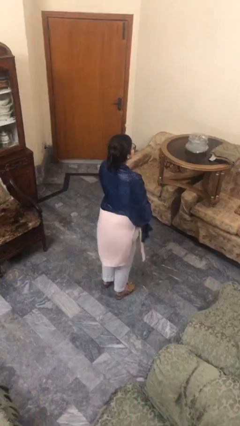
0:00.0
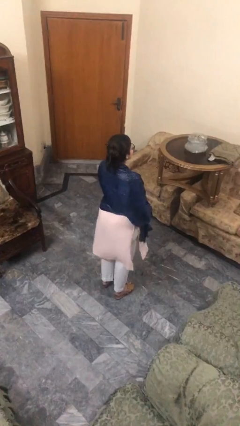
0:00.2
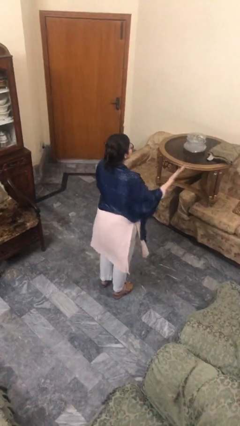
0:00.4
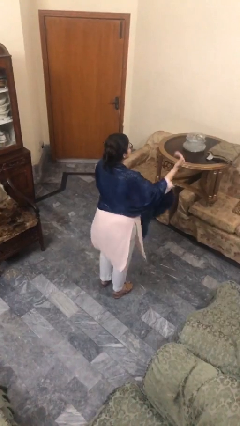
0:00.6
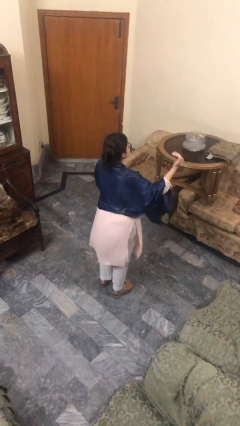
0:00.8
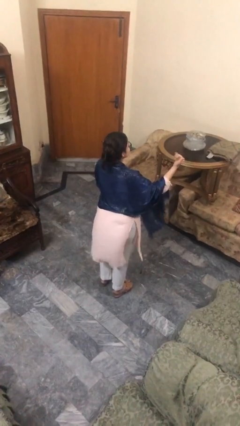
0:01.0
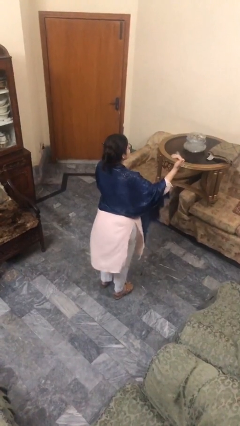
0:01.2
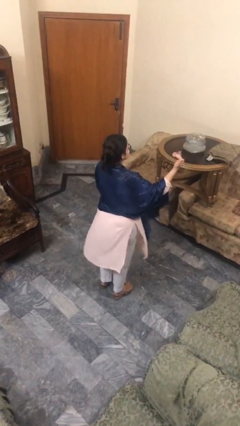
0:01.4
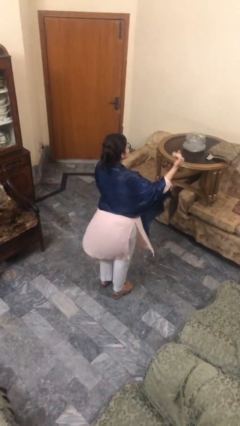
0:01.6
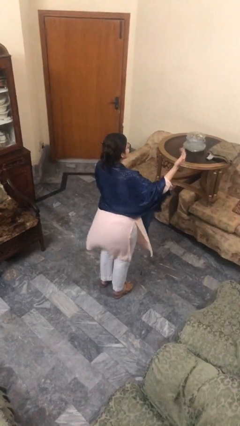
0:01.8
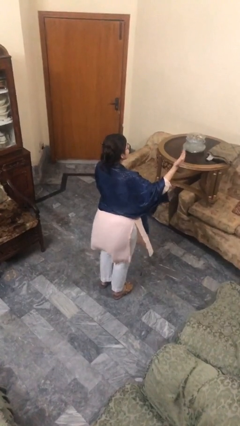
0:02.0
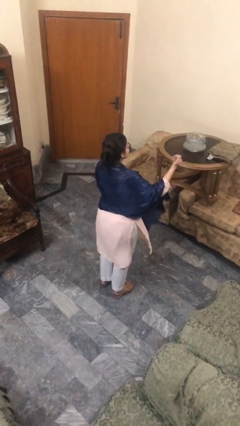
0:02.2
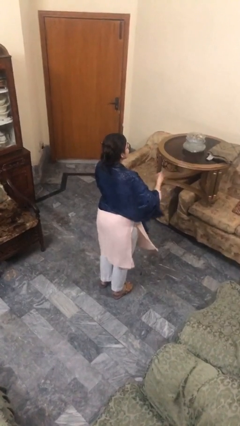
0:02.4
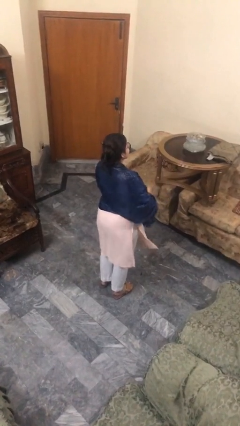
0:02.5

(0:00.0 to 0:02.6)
person gestures come here

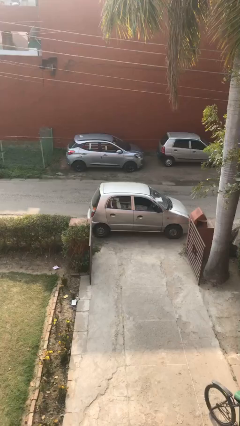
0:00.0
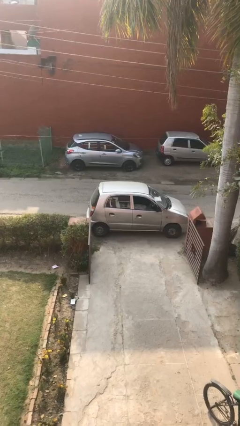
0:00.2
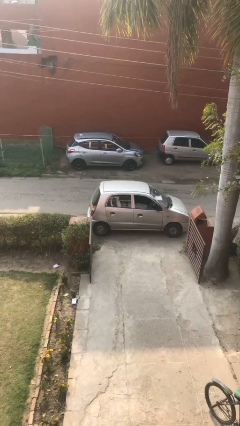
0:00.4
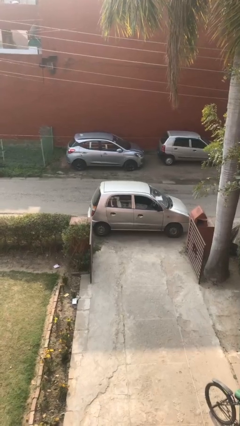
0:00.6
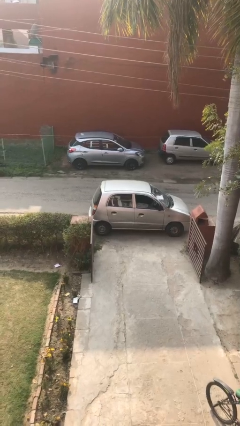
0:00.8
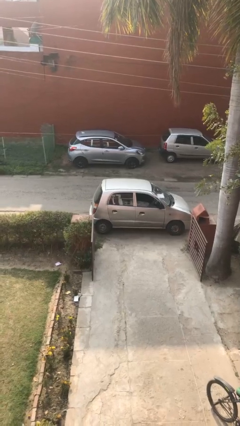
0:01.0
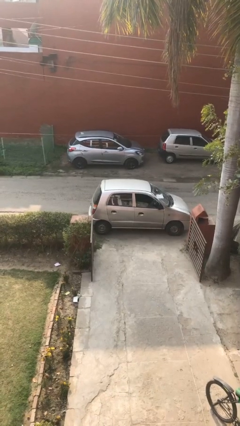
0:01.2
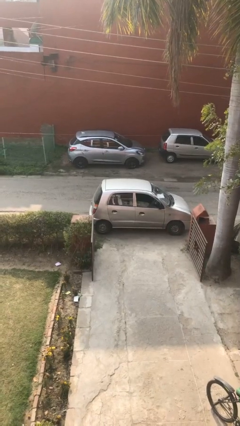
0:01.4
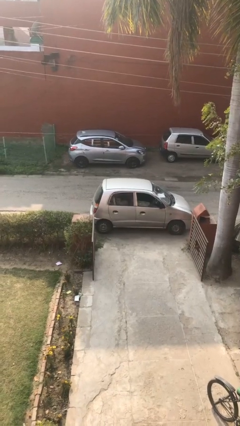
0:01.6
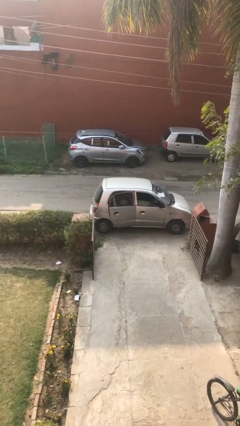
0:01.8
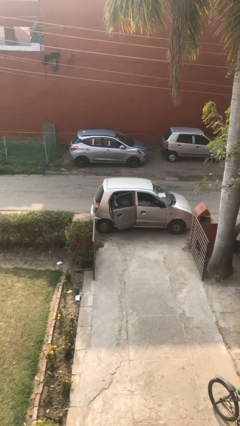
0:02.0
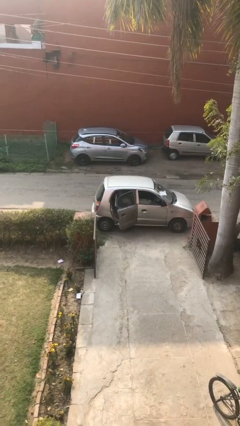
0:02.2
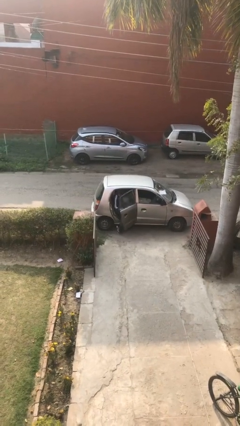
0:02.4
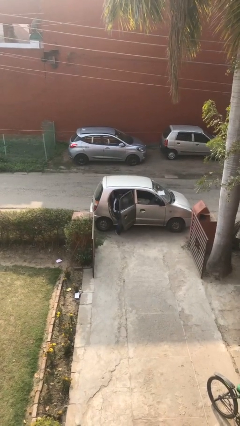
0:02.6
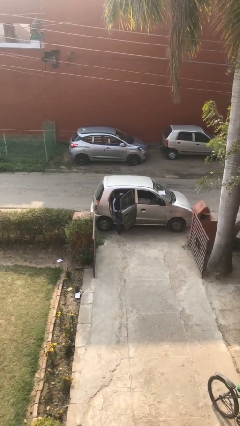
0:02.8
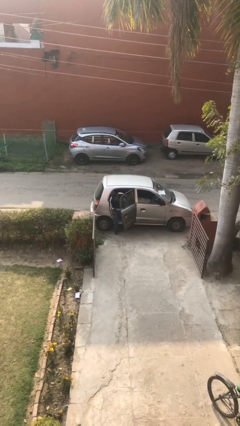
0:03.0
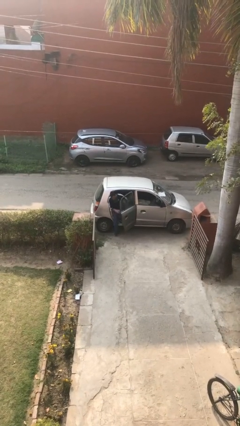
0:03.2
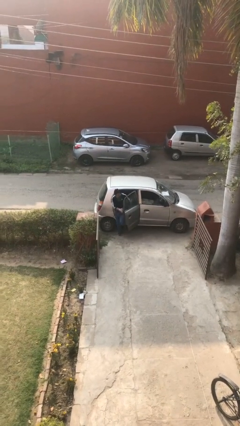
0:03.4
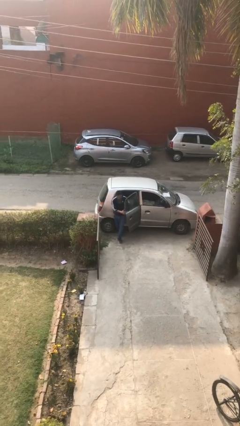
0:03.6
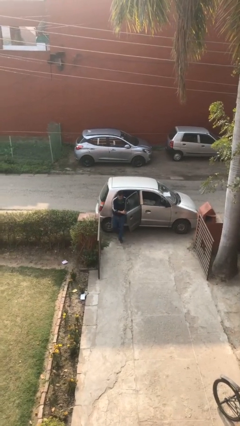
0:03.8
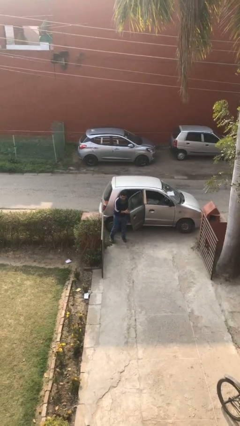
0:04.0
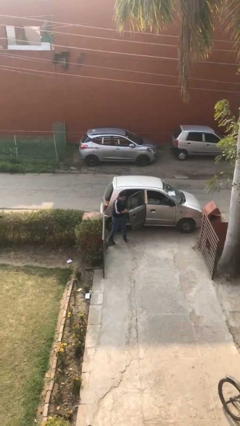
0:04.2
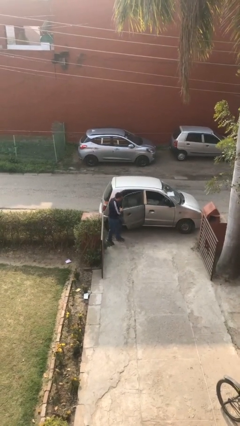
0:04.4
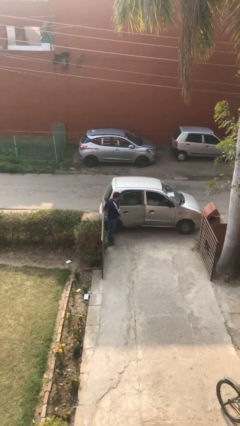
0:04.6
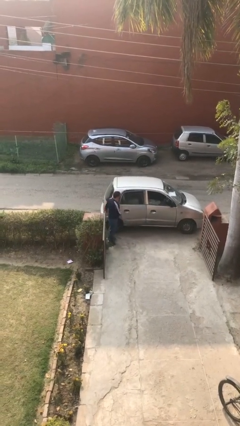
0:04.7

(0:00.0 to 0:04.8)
person exits car

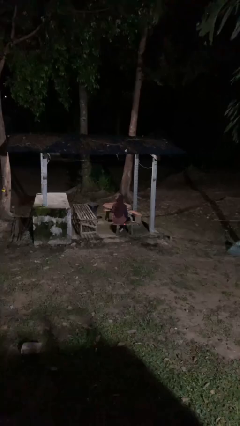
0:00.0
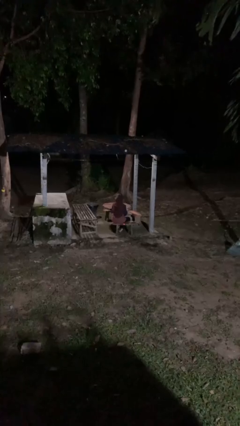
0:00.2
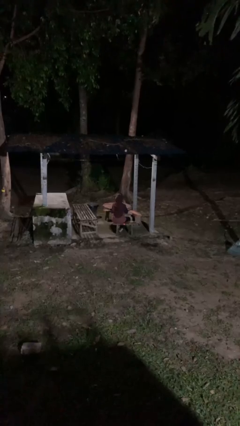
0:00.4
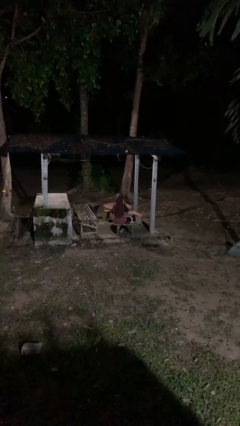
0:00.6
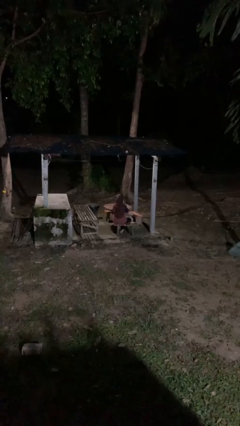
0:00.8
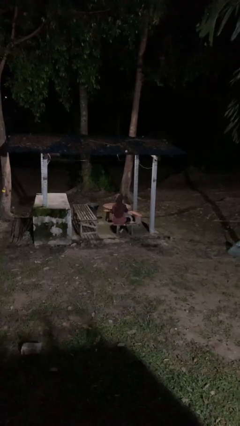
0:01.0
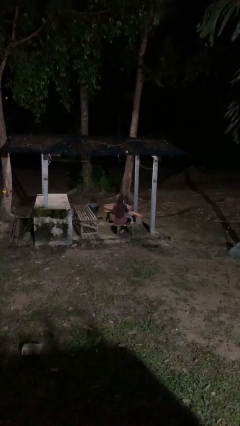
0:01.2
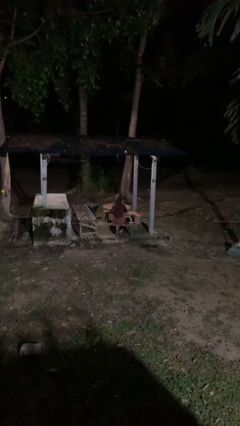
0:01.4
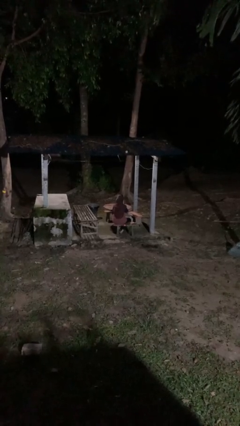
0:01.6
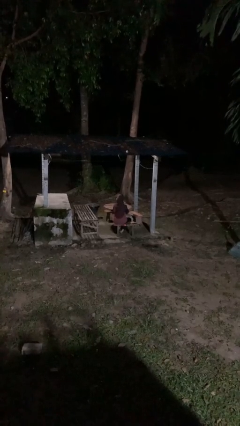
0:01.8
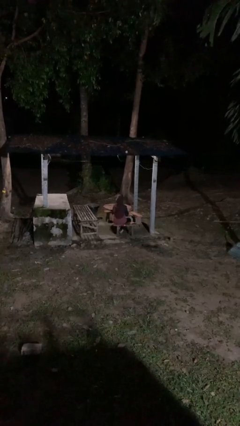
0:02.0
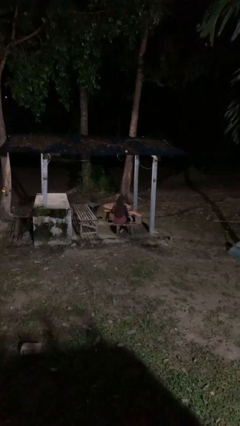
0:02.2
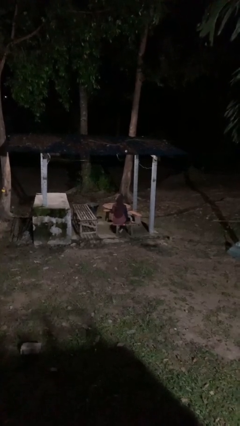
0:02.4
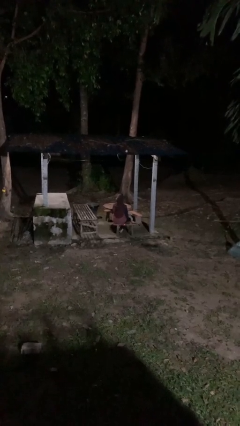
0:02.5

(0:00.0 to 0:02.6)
person strokes chin

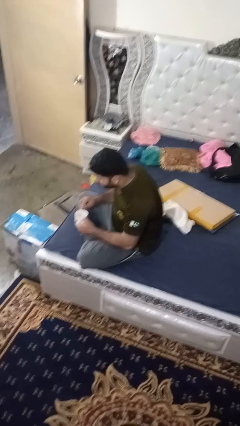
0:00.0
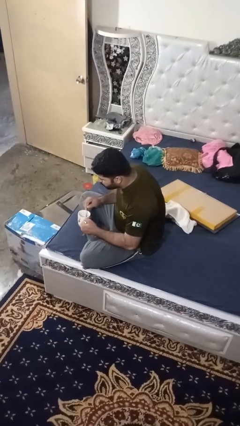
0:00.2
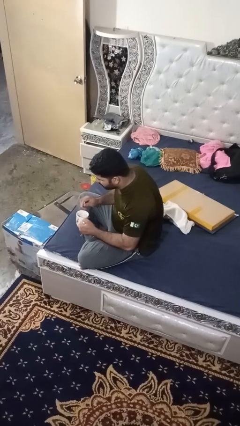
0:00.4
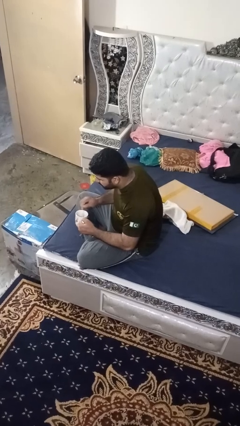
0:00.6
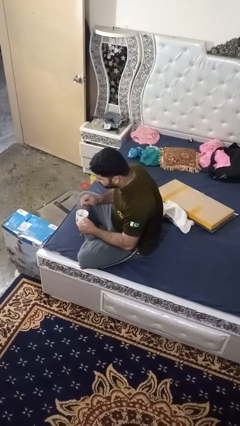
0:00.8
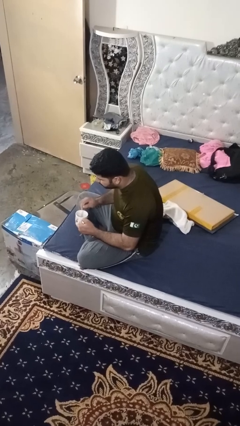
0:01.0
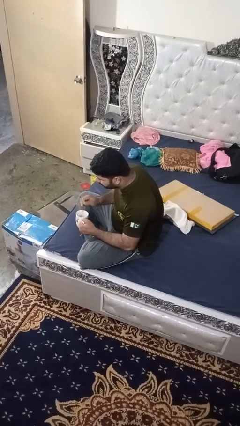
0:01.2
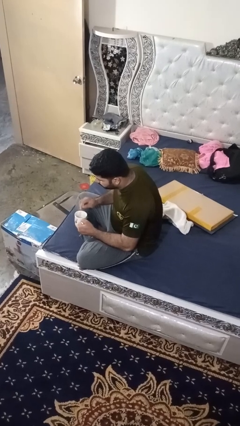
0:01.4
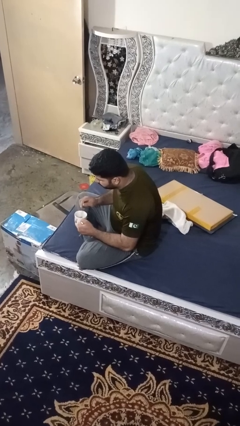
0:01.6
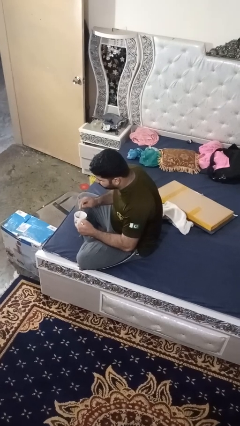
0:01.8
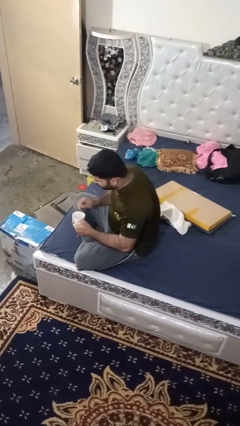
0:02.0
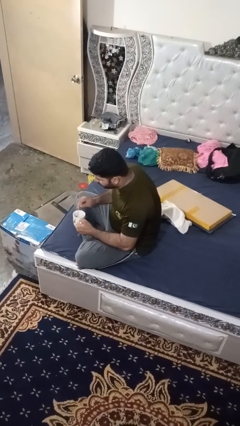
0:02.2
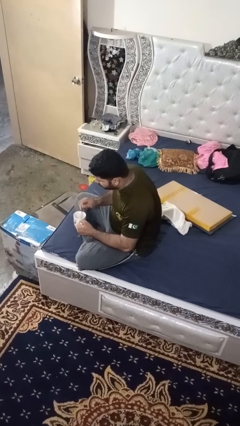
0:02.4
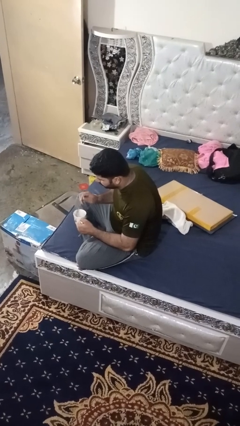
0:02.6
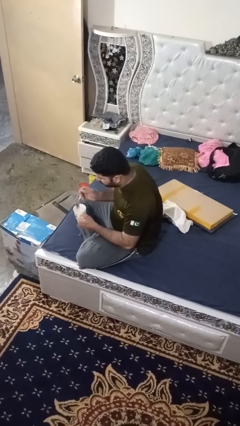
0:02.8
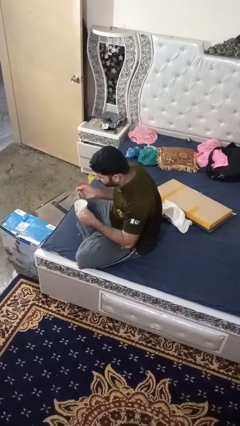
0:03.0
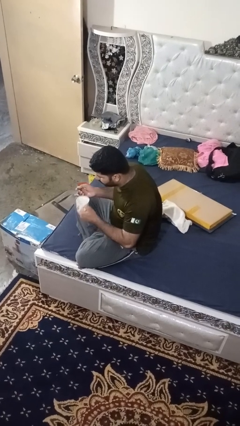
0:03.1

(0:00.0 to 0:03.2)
person stirs mug

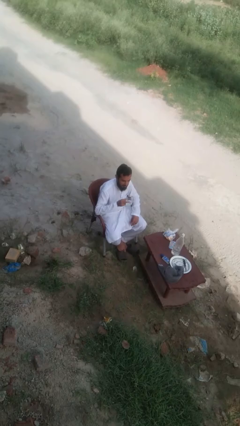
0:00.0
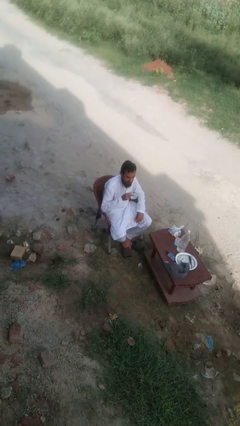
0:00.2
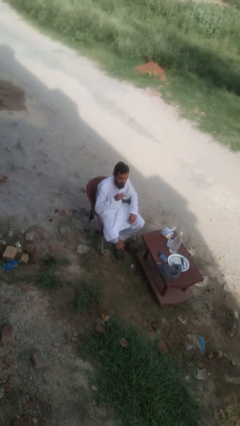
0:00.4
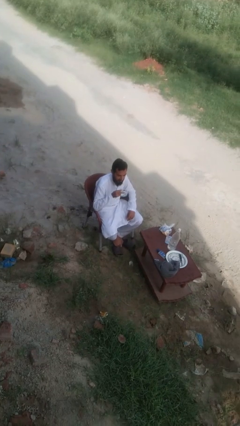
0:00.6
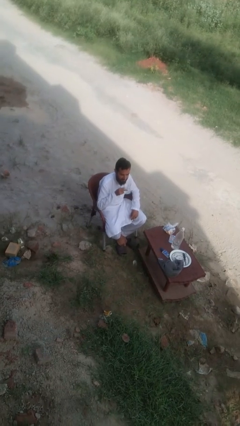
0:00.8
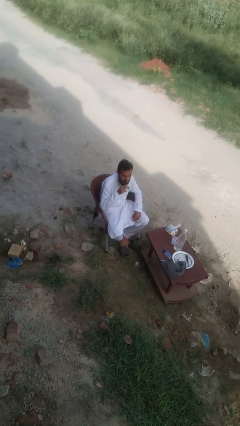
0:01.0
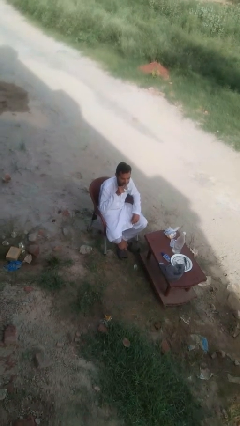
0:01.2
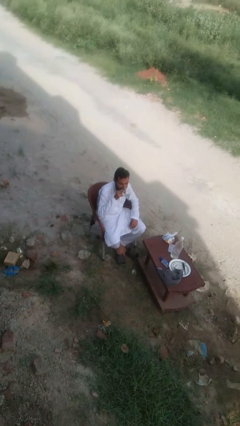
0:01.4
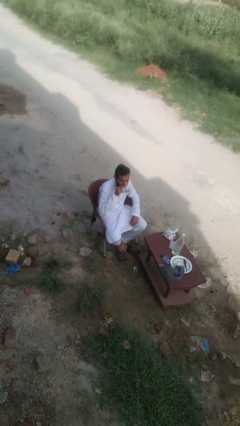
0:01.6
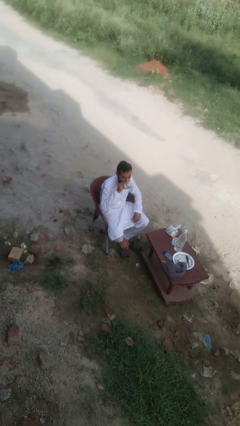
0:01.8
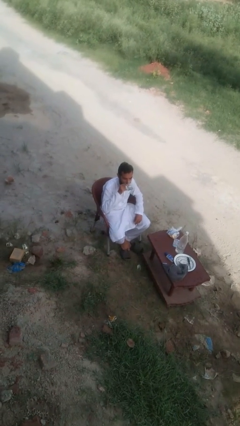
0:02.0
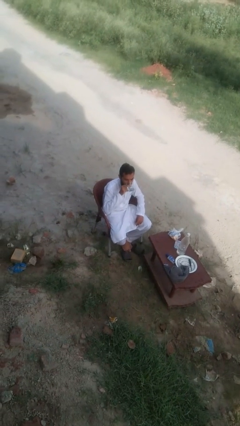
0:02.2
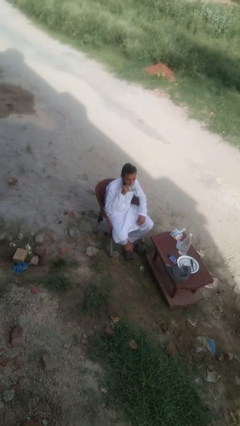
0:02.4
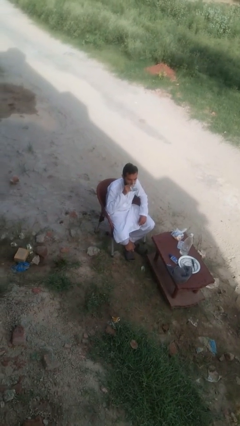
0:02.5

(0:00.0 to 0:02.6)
person drinks from mug

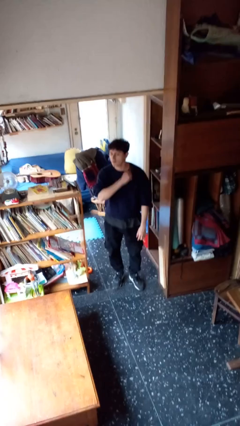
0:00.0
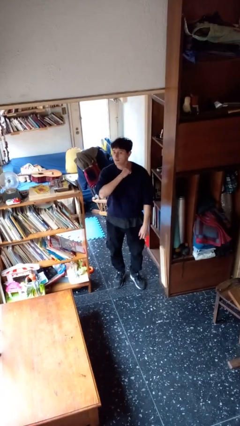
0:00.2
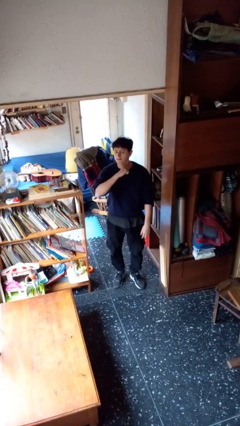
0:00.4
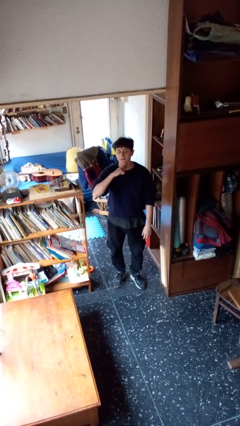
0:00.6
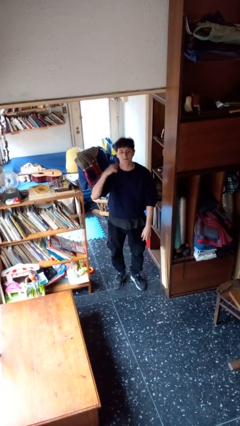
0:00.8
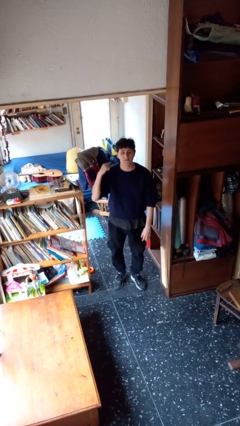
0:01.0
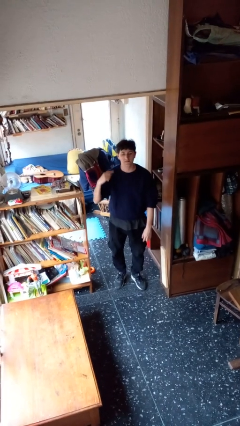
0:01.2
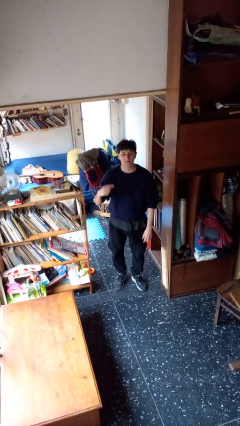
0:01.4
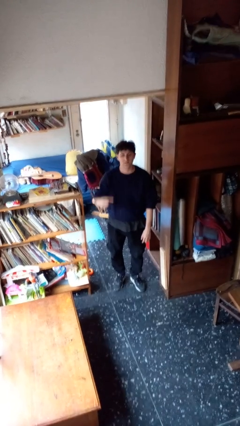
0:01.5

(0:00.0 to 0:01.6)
person gestures cut
